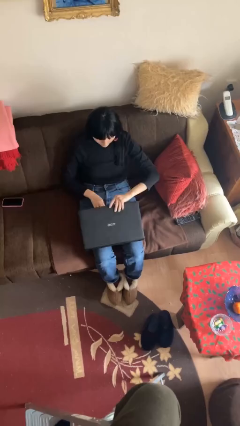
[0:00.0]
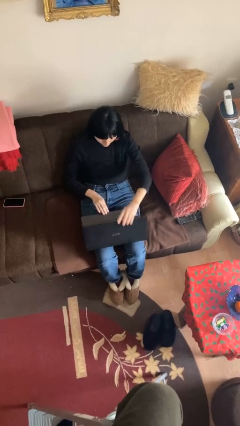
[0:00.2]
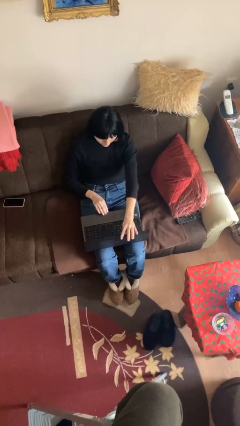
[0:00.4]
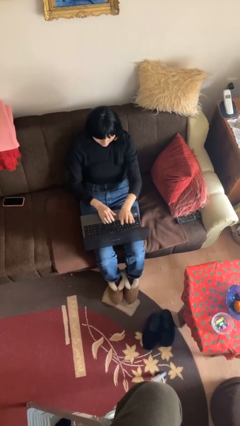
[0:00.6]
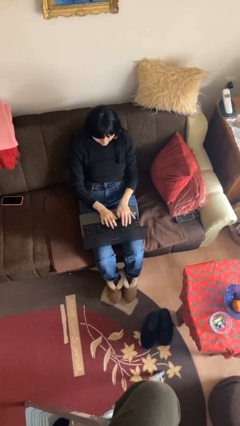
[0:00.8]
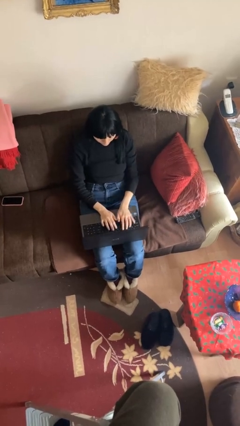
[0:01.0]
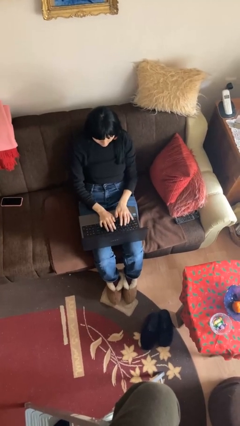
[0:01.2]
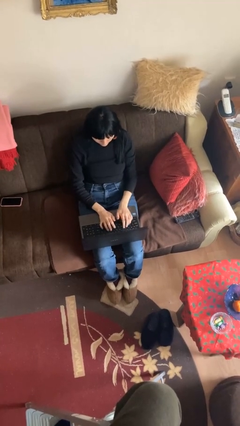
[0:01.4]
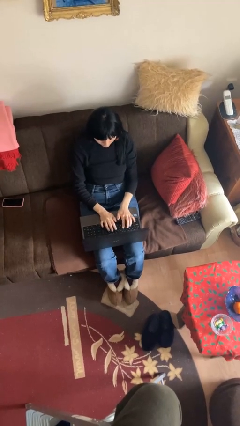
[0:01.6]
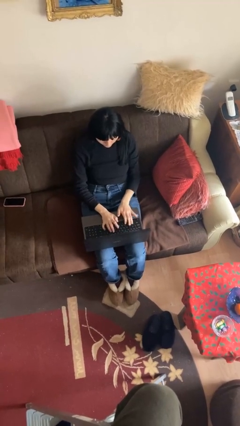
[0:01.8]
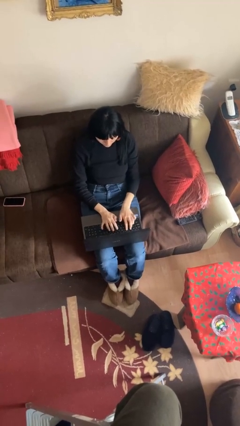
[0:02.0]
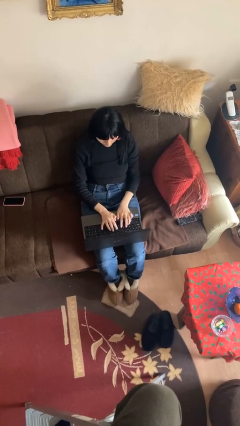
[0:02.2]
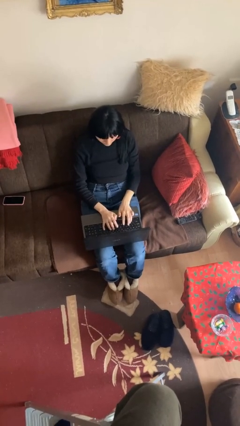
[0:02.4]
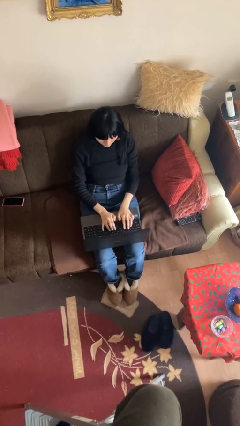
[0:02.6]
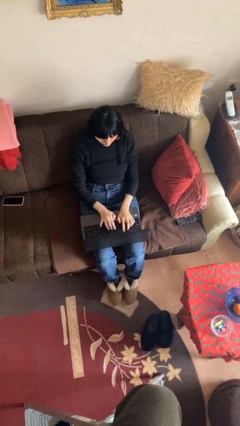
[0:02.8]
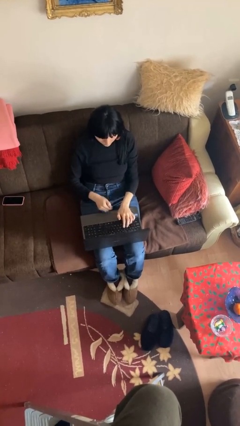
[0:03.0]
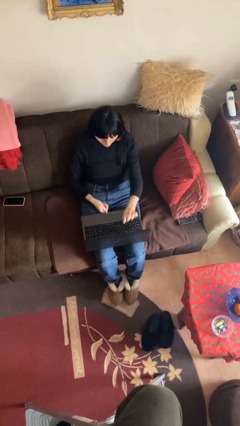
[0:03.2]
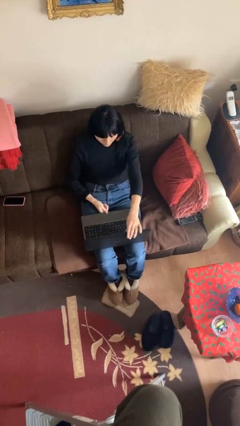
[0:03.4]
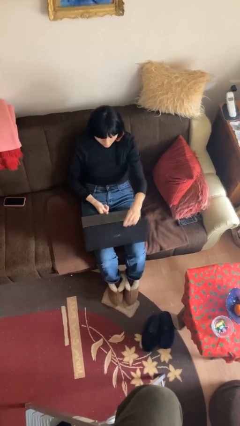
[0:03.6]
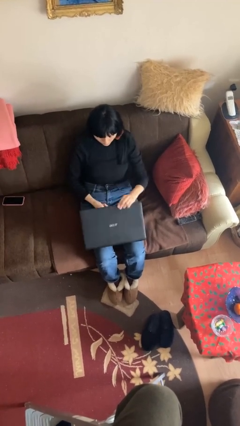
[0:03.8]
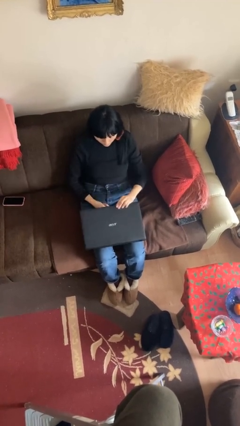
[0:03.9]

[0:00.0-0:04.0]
person interacts with laptop

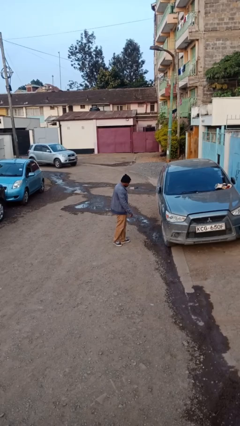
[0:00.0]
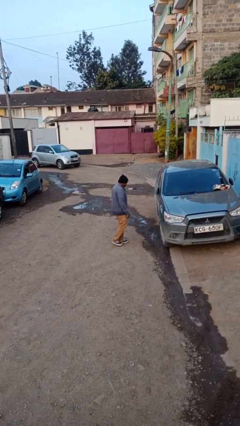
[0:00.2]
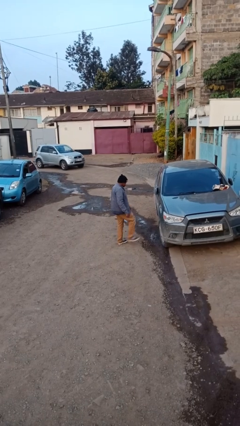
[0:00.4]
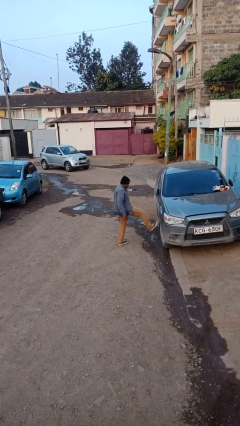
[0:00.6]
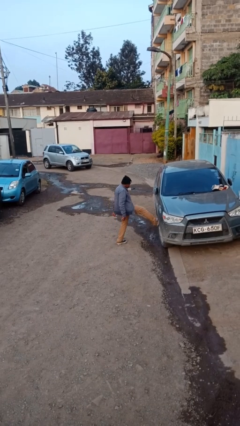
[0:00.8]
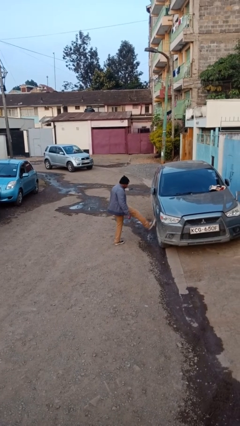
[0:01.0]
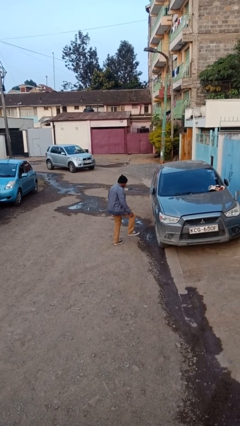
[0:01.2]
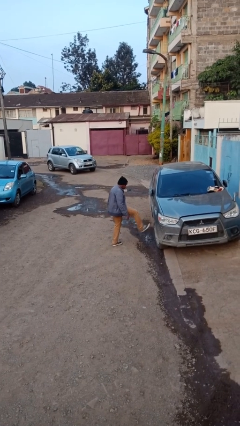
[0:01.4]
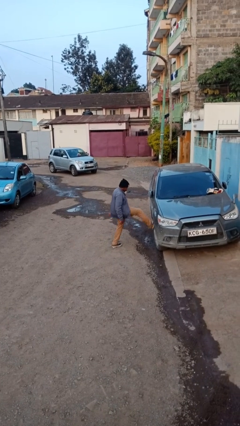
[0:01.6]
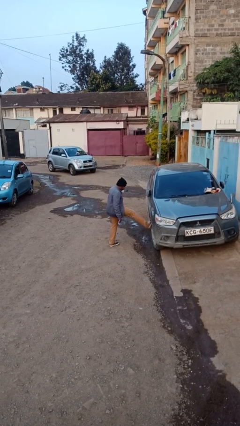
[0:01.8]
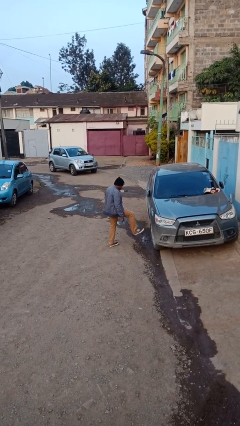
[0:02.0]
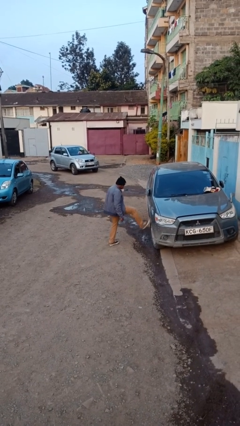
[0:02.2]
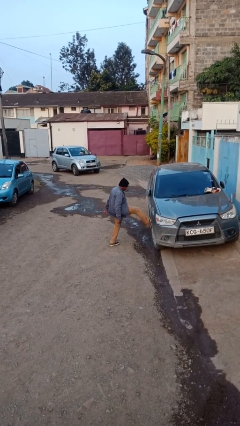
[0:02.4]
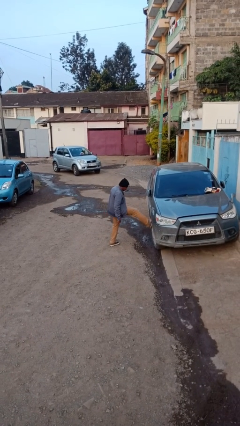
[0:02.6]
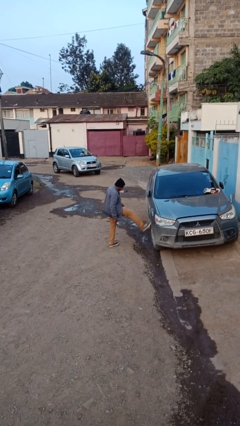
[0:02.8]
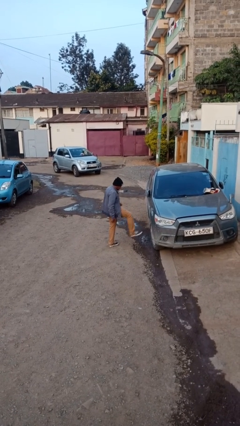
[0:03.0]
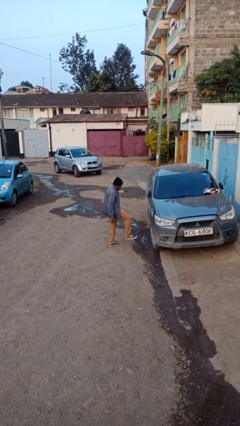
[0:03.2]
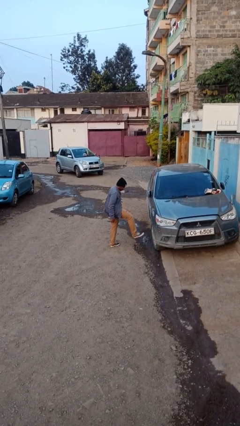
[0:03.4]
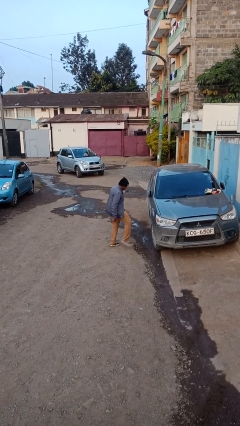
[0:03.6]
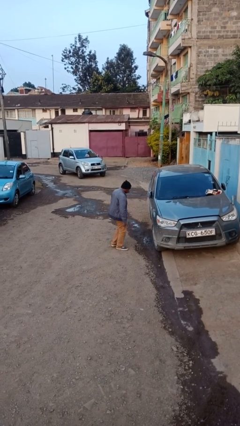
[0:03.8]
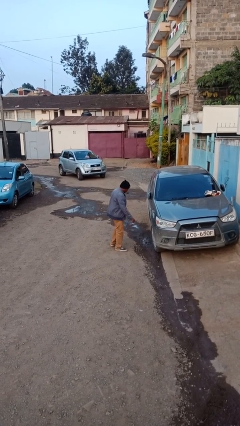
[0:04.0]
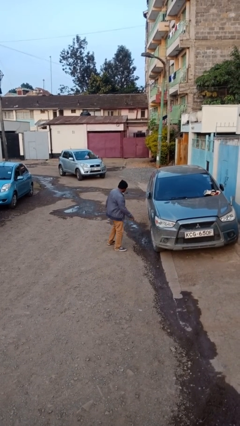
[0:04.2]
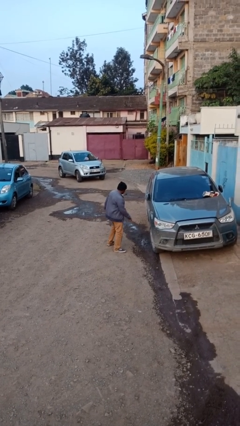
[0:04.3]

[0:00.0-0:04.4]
person kicks car tires

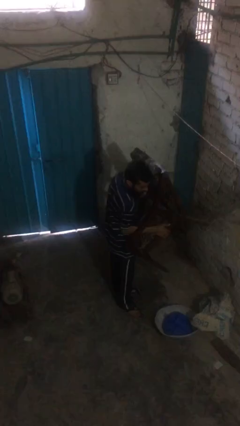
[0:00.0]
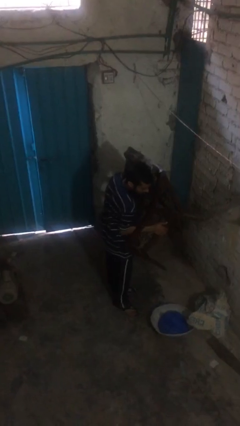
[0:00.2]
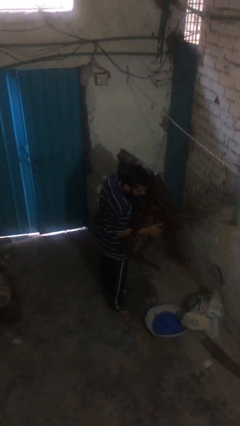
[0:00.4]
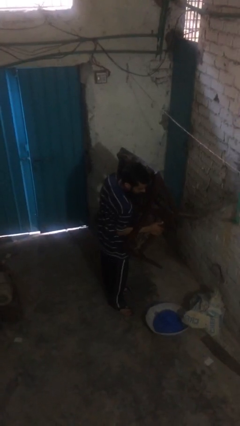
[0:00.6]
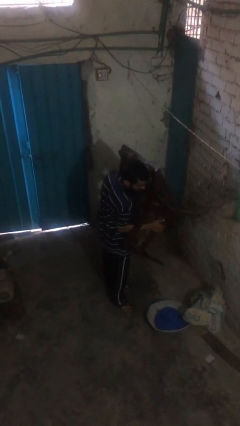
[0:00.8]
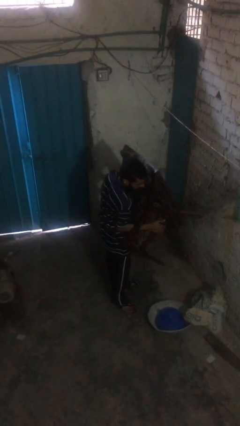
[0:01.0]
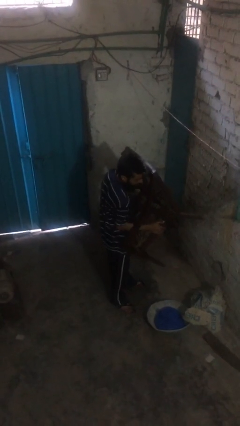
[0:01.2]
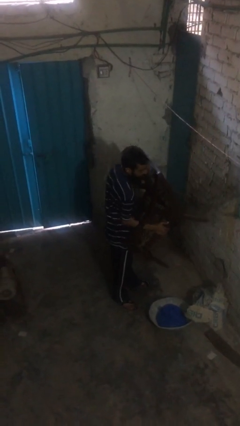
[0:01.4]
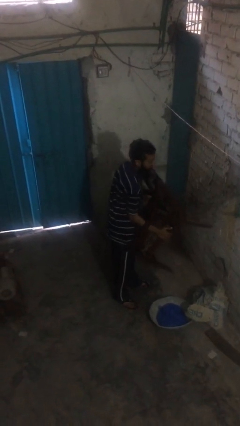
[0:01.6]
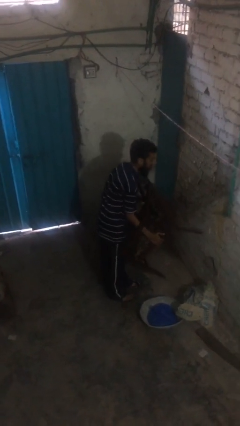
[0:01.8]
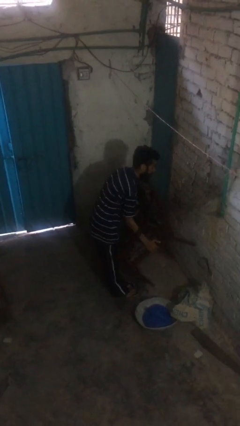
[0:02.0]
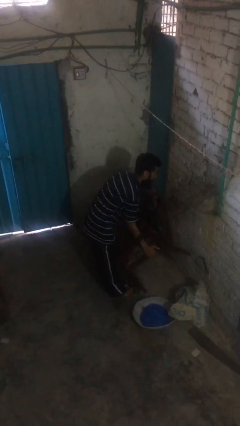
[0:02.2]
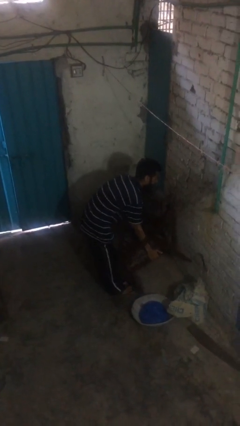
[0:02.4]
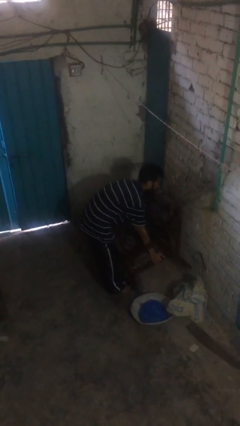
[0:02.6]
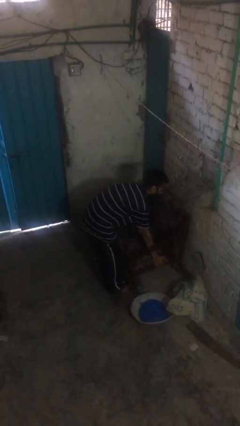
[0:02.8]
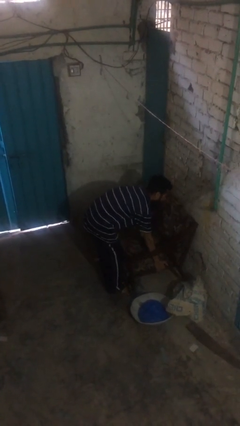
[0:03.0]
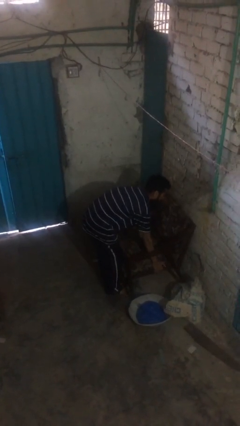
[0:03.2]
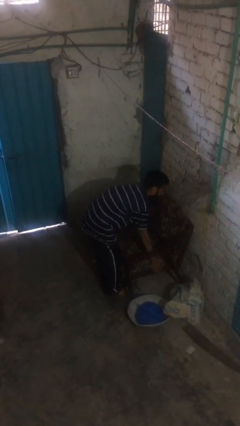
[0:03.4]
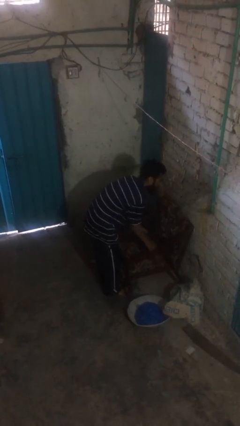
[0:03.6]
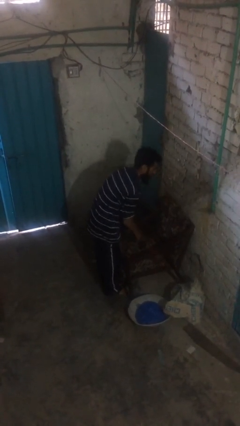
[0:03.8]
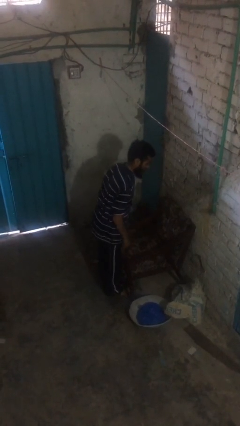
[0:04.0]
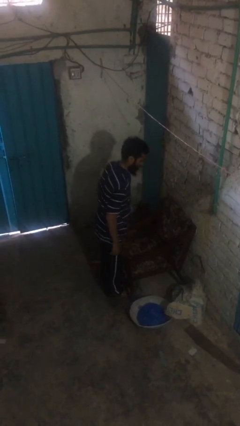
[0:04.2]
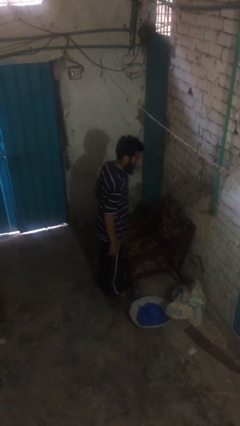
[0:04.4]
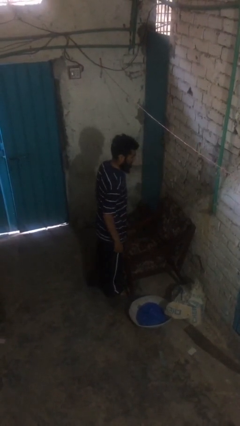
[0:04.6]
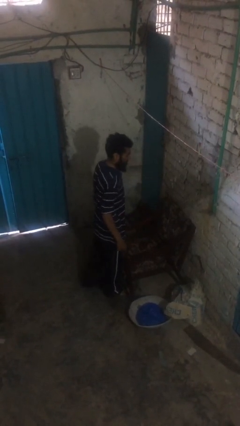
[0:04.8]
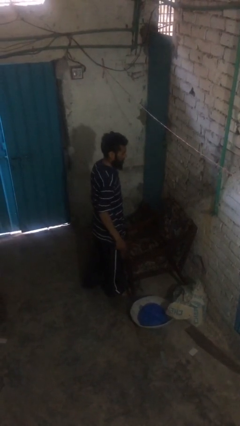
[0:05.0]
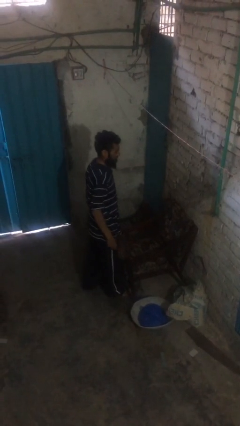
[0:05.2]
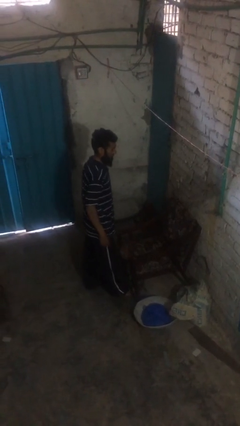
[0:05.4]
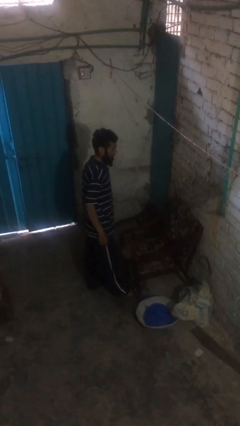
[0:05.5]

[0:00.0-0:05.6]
person puts down object on floor

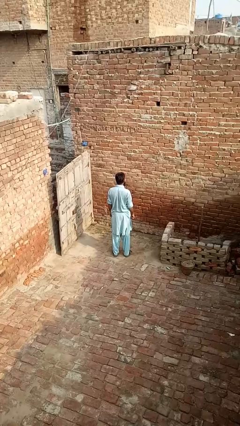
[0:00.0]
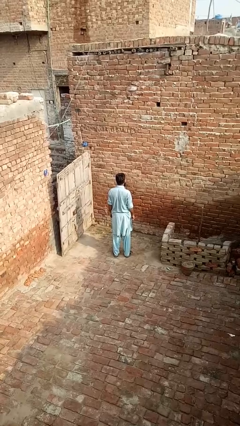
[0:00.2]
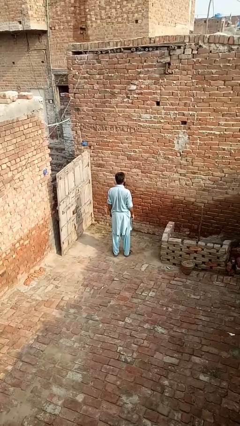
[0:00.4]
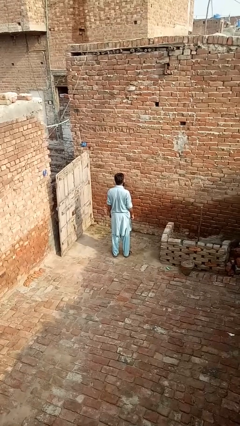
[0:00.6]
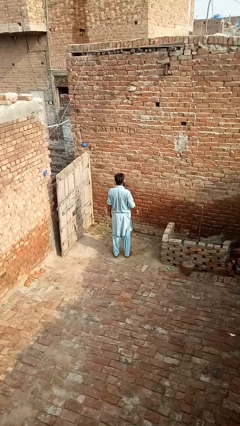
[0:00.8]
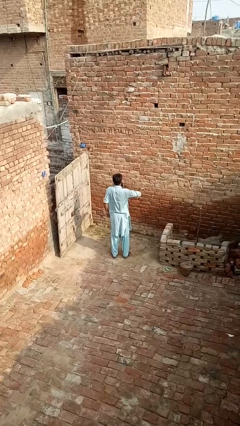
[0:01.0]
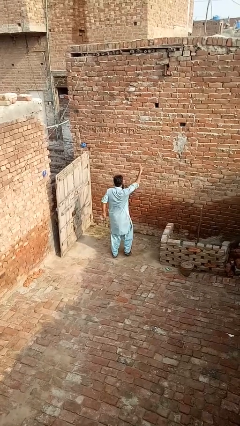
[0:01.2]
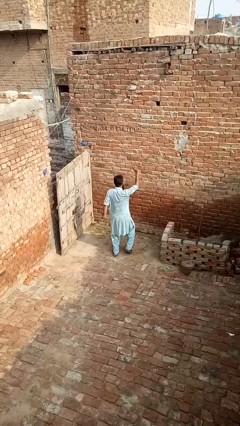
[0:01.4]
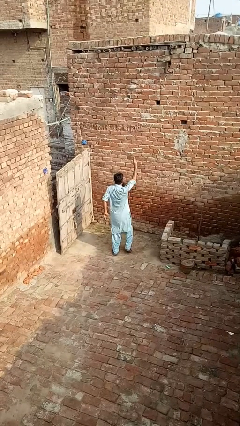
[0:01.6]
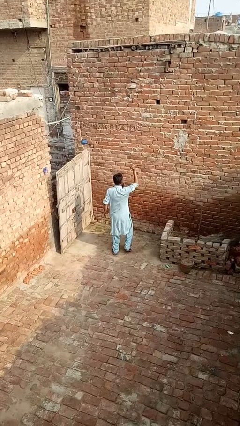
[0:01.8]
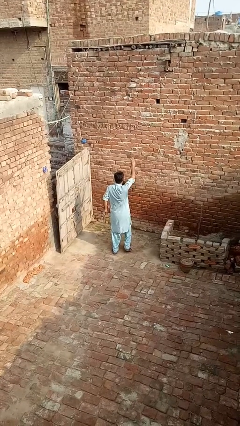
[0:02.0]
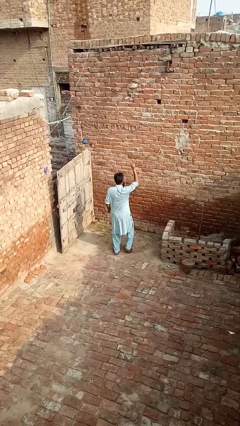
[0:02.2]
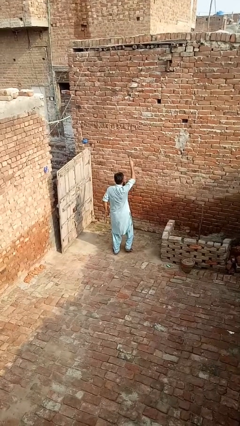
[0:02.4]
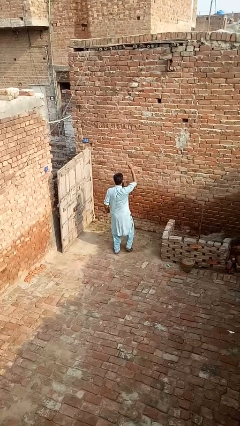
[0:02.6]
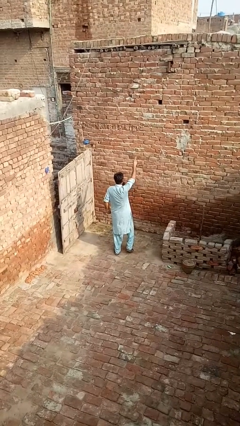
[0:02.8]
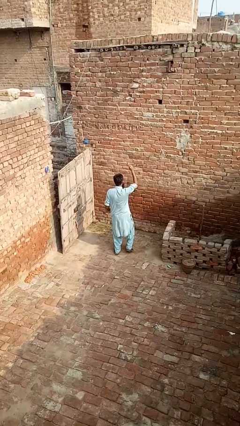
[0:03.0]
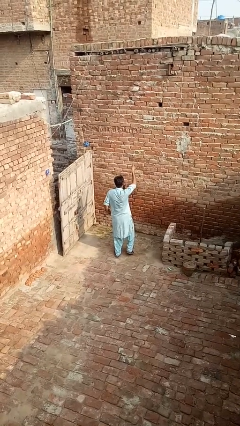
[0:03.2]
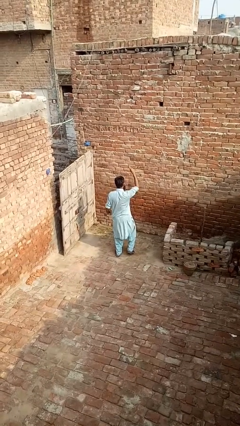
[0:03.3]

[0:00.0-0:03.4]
person dances in place
